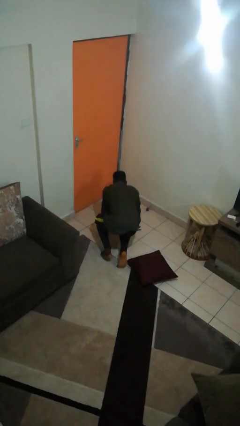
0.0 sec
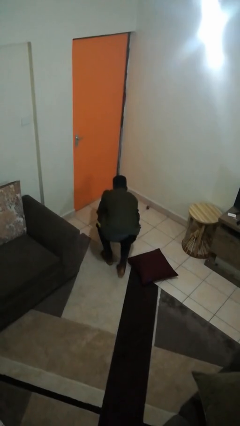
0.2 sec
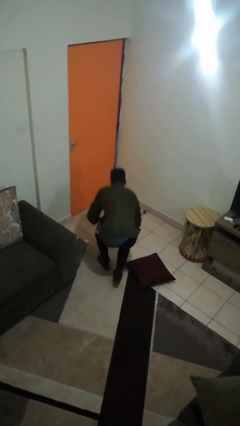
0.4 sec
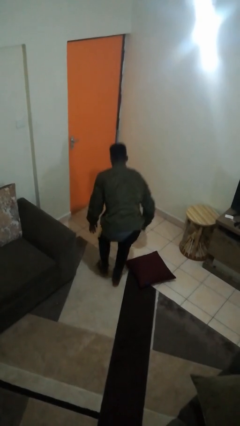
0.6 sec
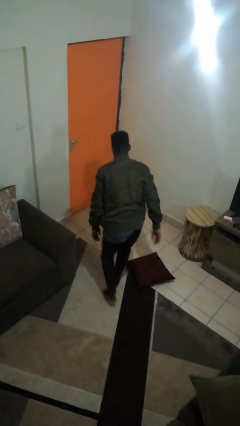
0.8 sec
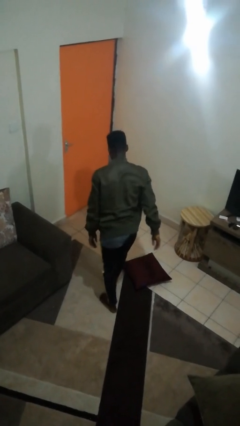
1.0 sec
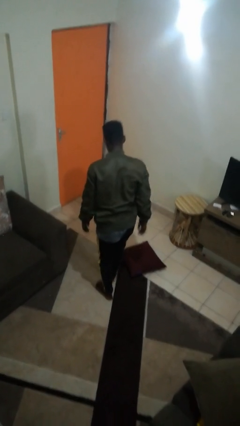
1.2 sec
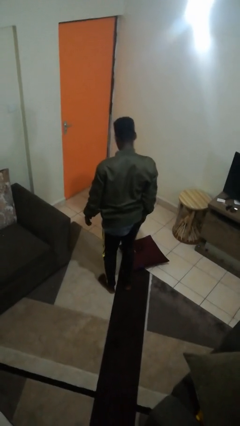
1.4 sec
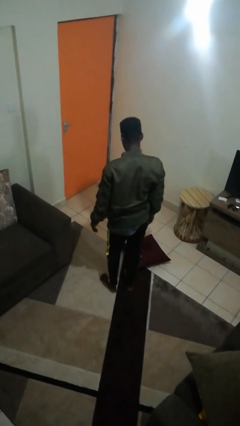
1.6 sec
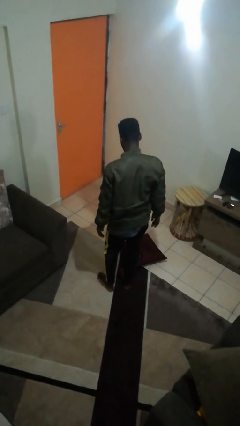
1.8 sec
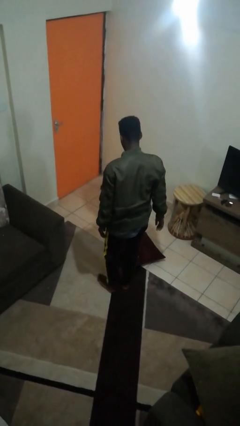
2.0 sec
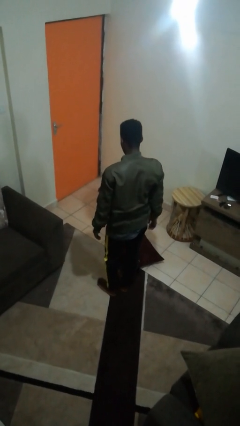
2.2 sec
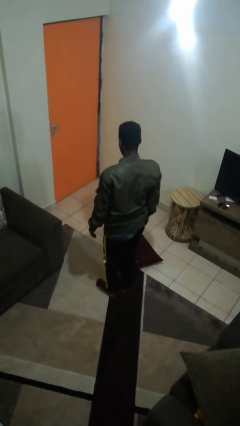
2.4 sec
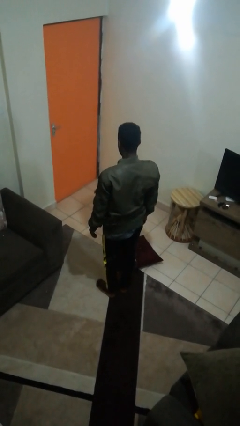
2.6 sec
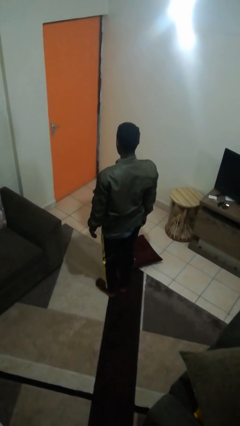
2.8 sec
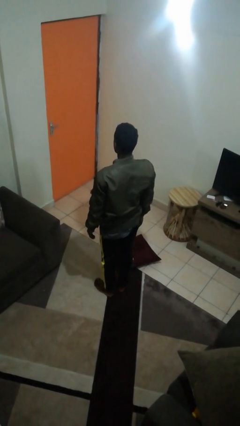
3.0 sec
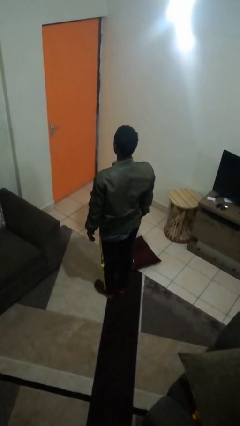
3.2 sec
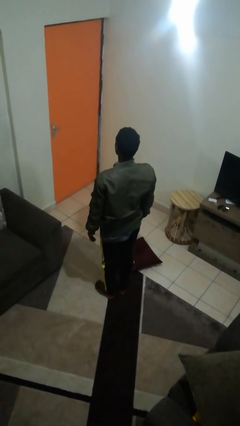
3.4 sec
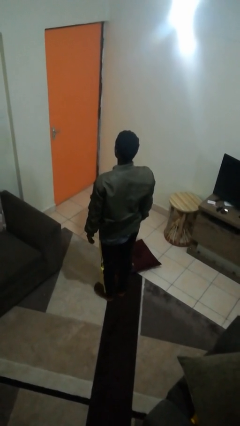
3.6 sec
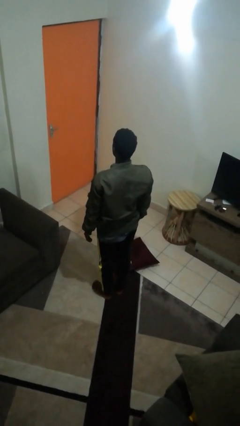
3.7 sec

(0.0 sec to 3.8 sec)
person stands up from floor

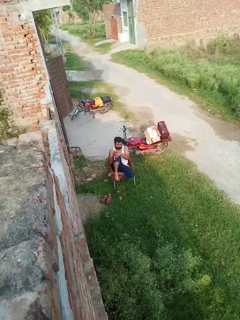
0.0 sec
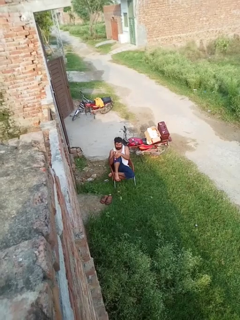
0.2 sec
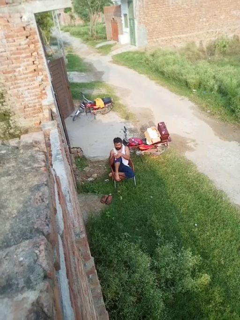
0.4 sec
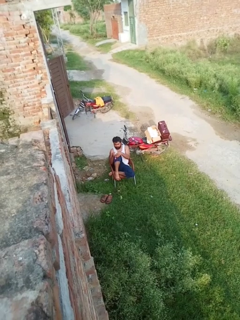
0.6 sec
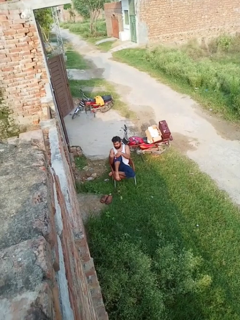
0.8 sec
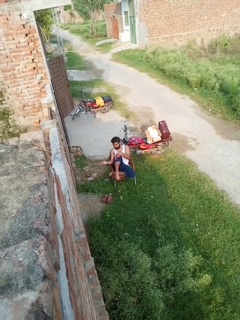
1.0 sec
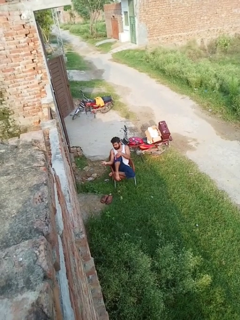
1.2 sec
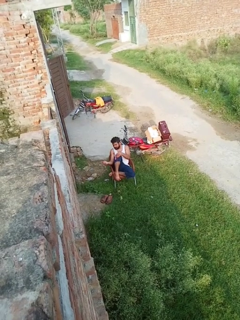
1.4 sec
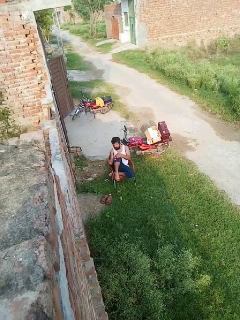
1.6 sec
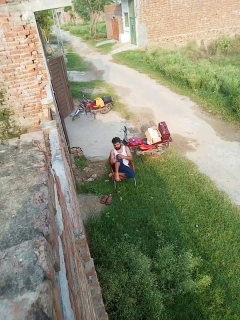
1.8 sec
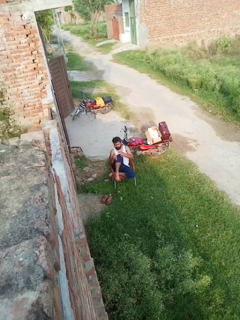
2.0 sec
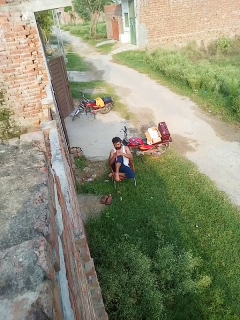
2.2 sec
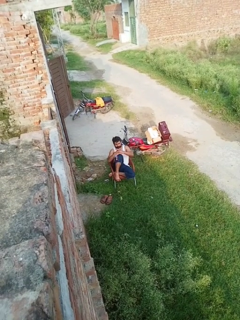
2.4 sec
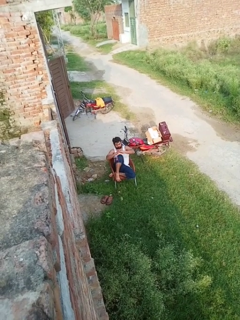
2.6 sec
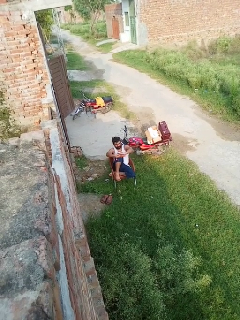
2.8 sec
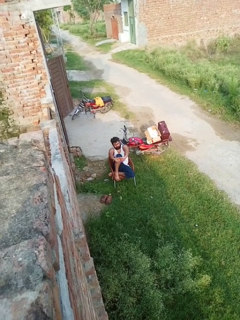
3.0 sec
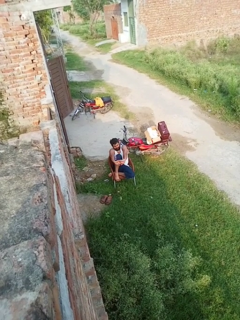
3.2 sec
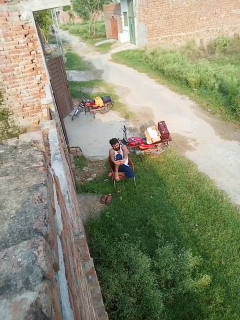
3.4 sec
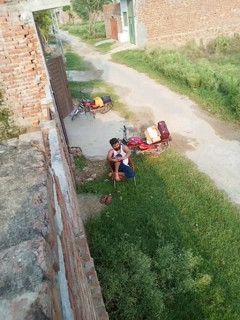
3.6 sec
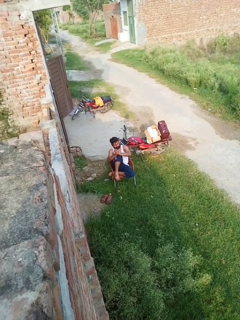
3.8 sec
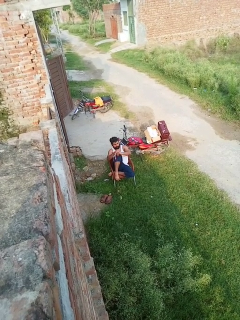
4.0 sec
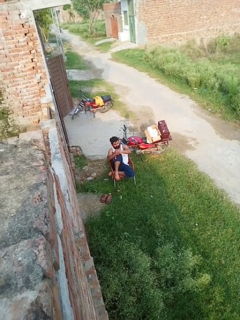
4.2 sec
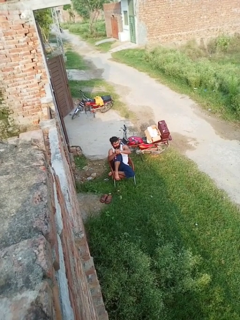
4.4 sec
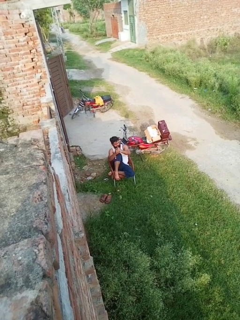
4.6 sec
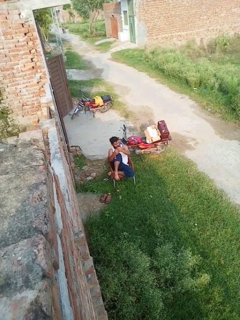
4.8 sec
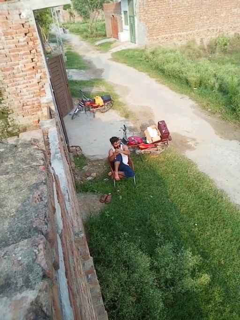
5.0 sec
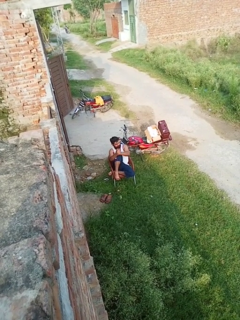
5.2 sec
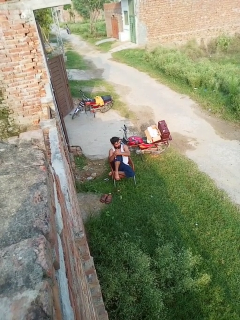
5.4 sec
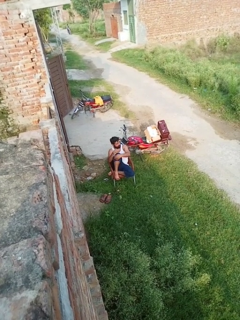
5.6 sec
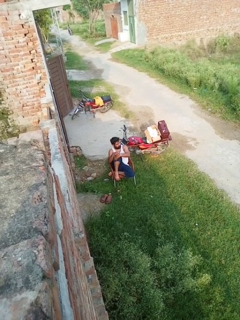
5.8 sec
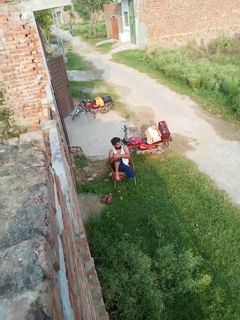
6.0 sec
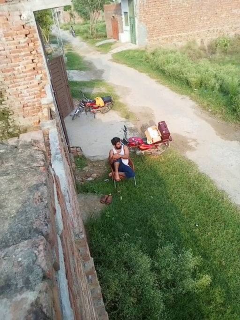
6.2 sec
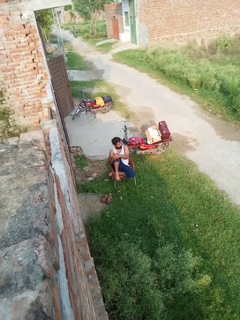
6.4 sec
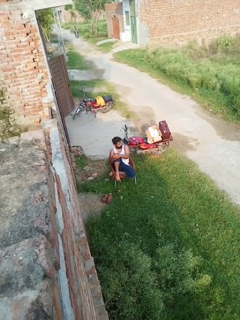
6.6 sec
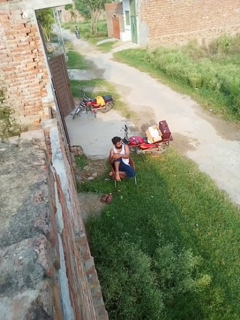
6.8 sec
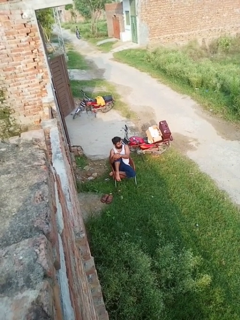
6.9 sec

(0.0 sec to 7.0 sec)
person cracks knuckles

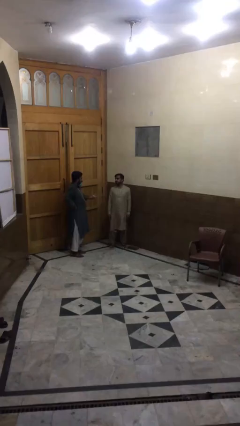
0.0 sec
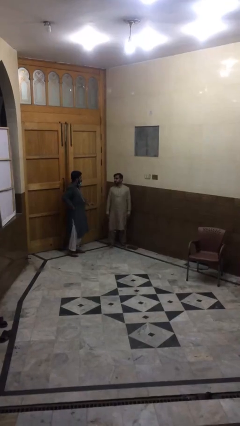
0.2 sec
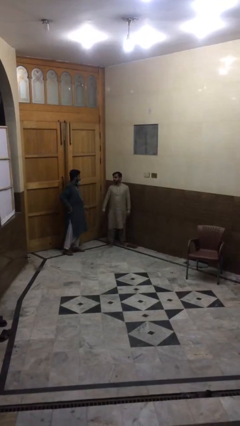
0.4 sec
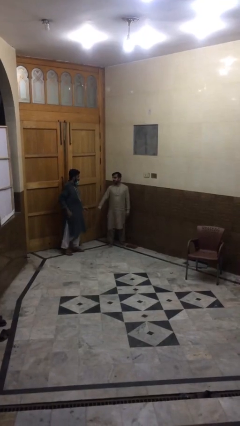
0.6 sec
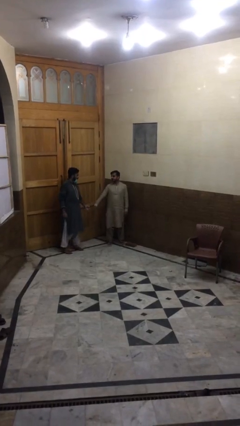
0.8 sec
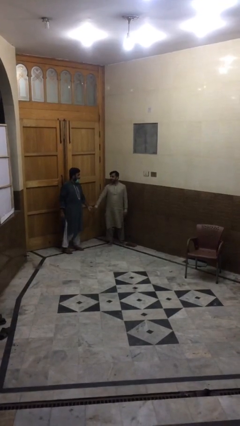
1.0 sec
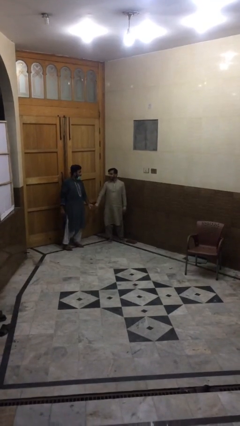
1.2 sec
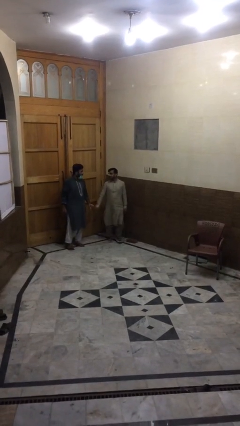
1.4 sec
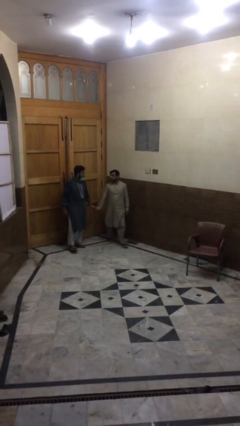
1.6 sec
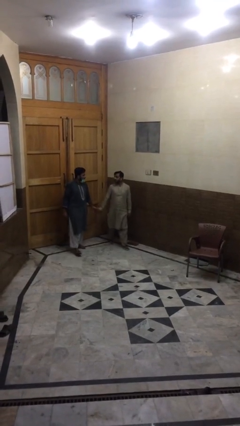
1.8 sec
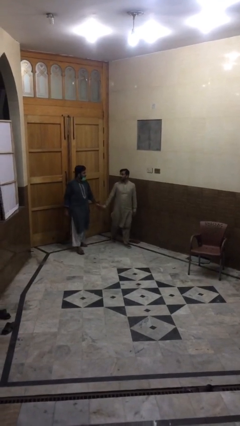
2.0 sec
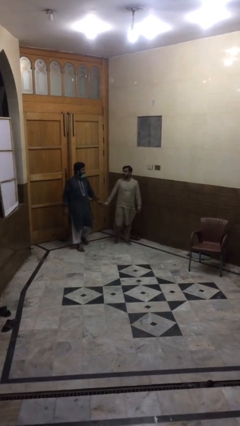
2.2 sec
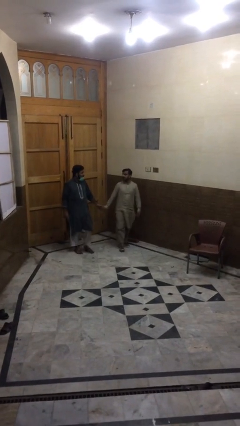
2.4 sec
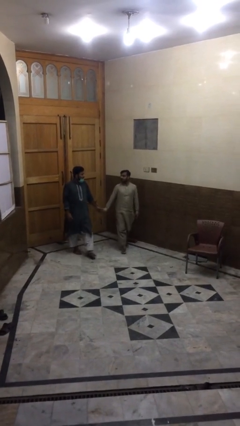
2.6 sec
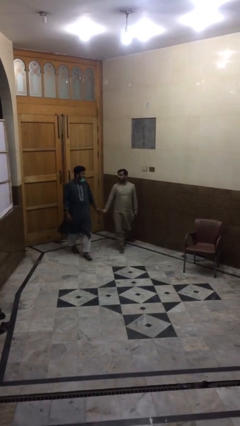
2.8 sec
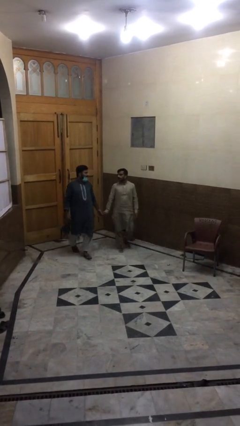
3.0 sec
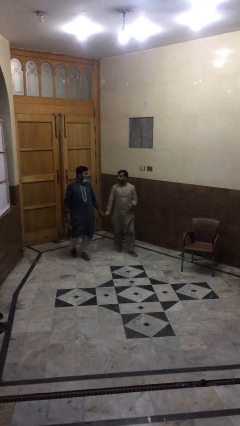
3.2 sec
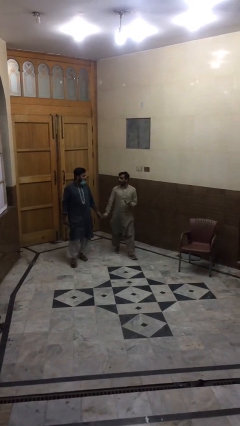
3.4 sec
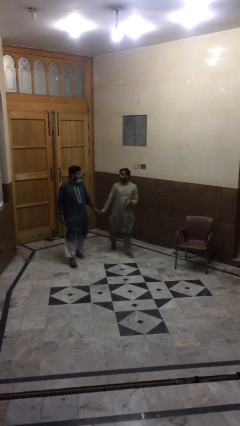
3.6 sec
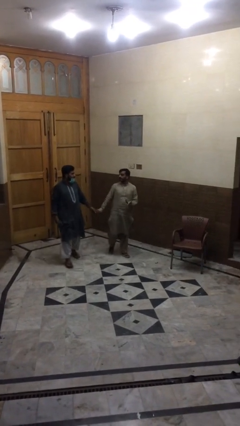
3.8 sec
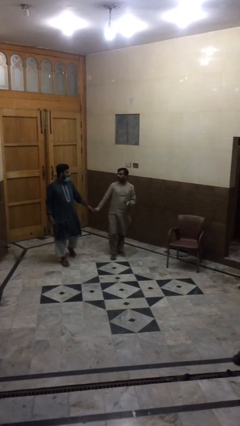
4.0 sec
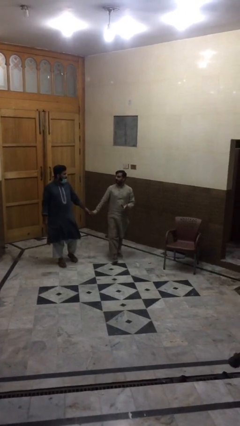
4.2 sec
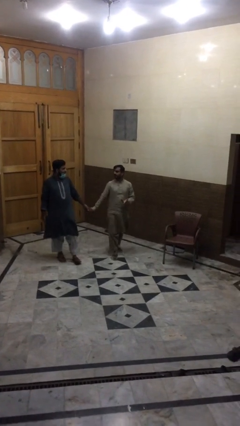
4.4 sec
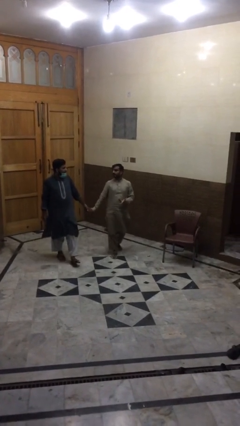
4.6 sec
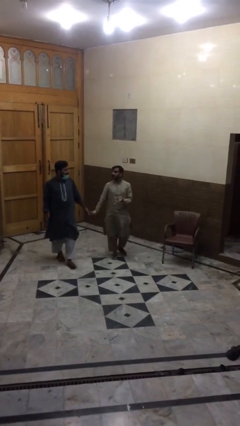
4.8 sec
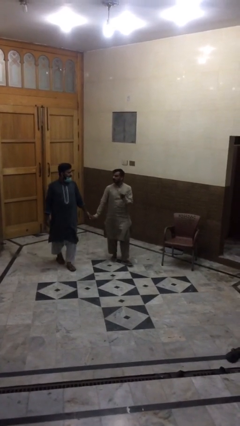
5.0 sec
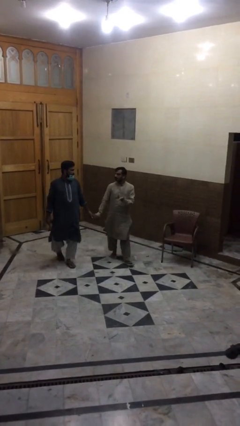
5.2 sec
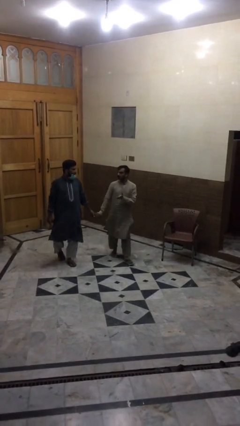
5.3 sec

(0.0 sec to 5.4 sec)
person holds hand

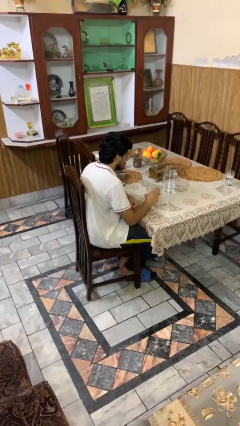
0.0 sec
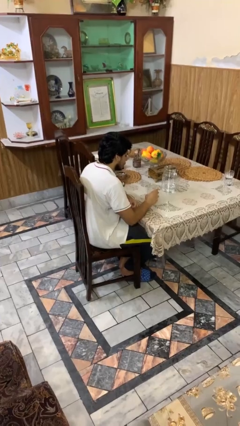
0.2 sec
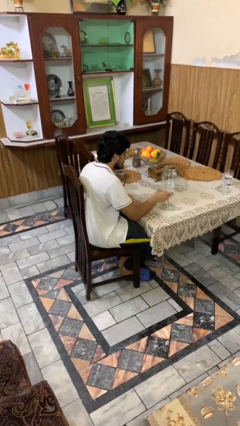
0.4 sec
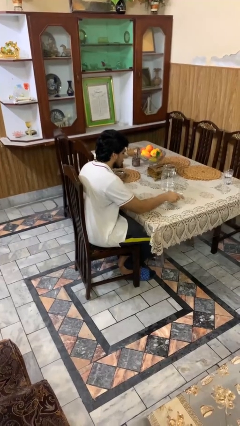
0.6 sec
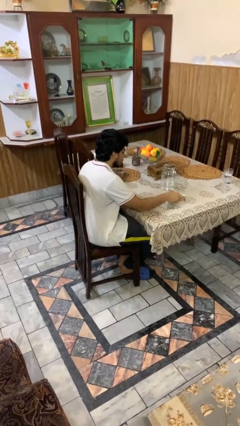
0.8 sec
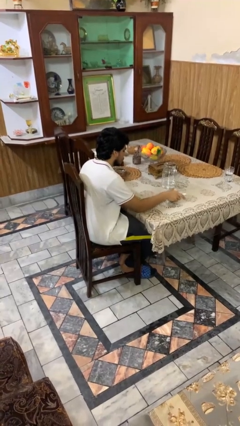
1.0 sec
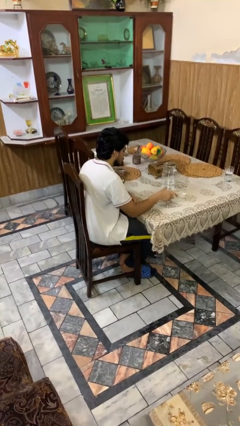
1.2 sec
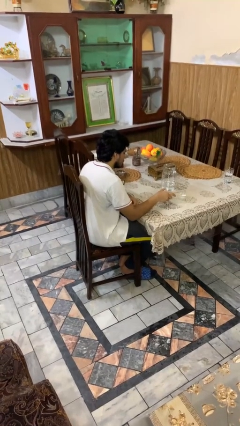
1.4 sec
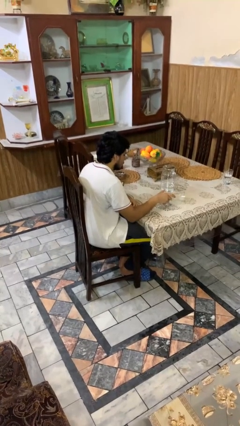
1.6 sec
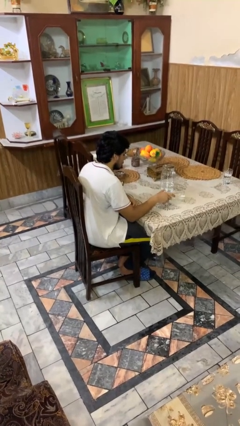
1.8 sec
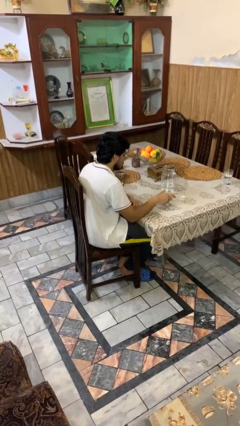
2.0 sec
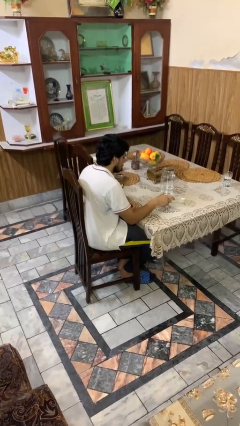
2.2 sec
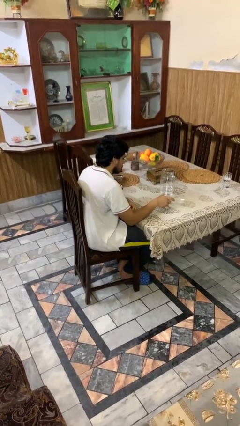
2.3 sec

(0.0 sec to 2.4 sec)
person knocks over glass

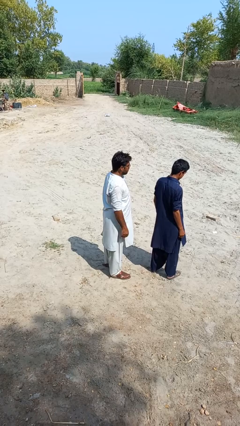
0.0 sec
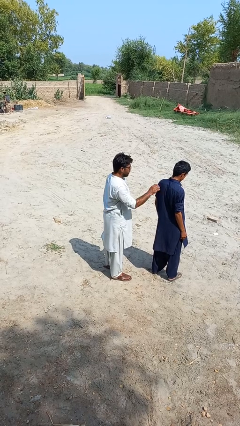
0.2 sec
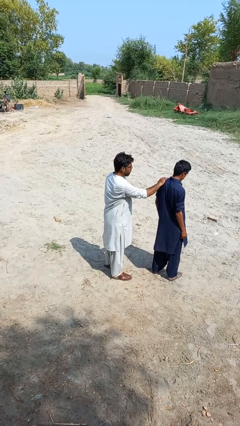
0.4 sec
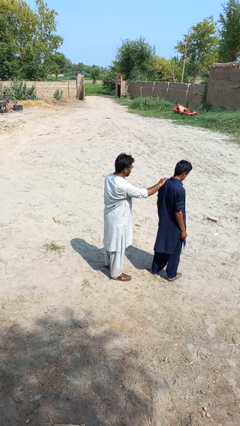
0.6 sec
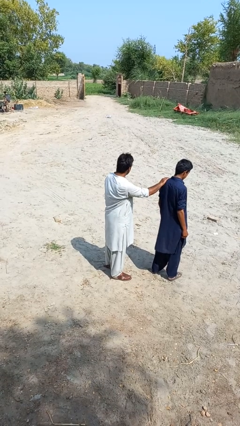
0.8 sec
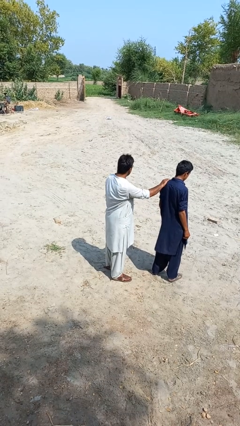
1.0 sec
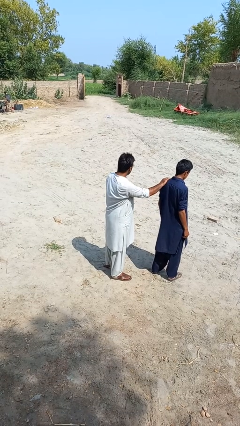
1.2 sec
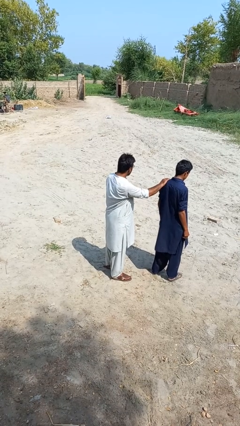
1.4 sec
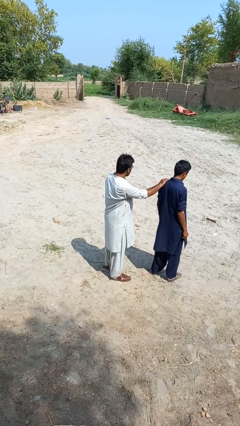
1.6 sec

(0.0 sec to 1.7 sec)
person grabs person by shoulder
